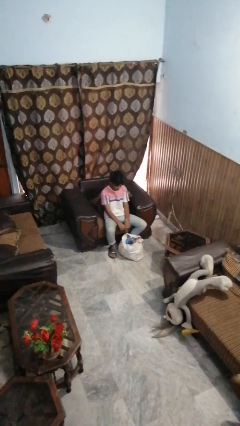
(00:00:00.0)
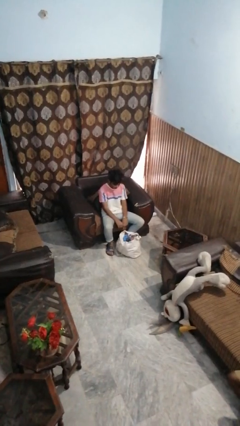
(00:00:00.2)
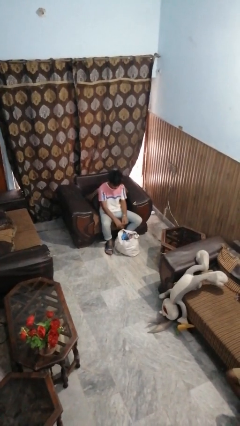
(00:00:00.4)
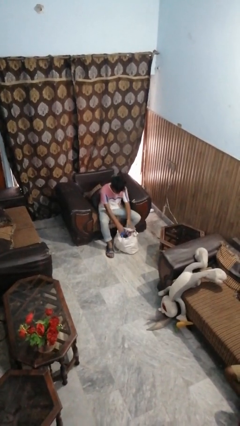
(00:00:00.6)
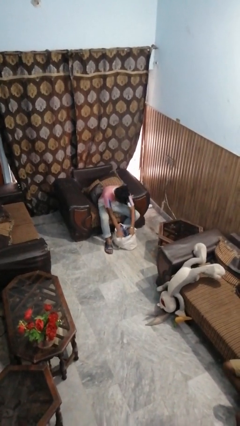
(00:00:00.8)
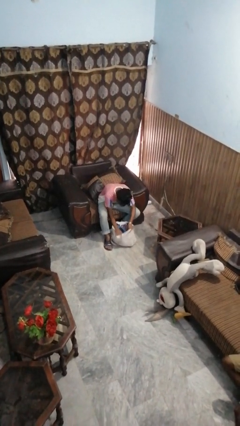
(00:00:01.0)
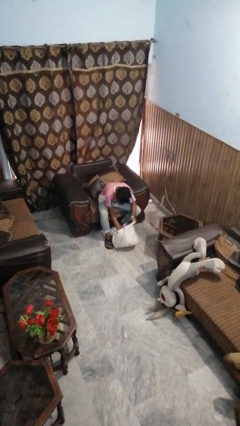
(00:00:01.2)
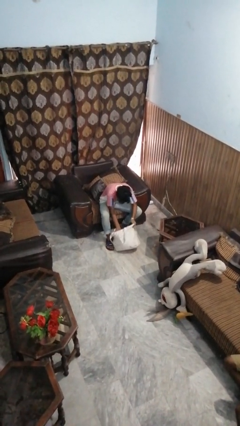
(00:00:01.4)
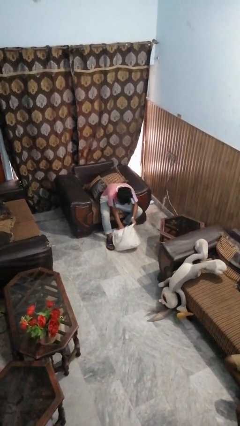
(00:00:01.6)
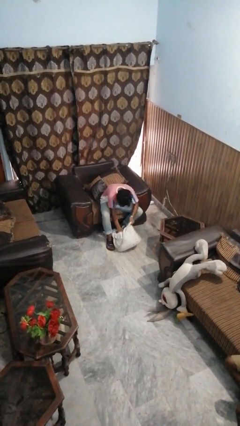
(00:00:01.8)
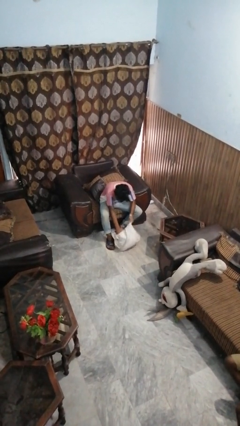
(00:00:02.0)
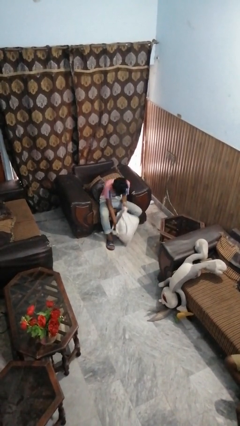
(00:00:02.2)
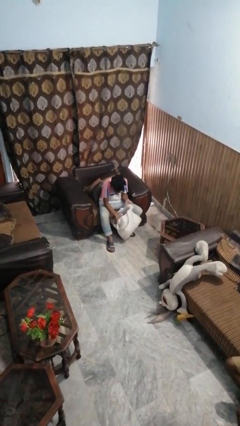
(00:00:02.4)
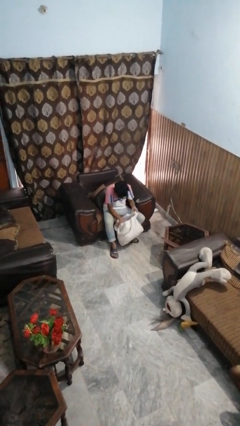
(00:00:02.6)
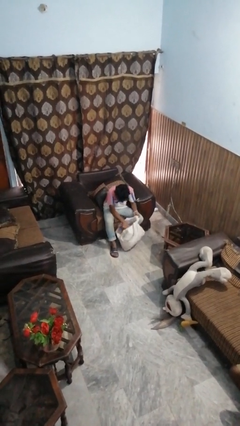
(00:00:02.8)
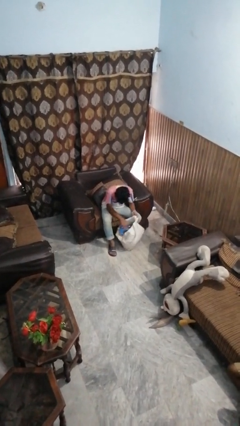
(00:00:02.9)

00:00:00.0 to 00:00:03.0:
person searches in bag

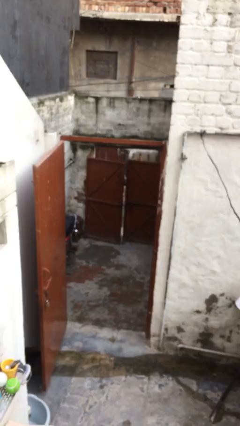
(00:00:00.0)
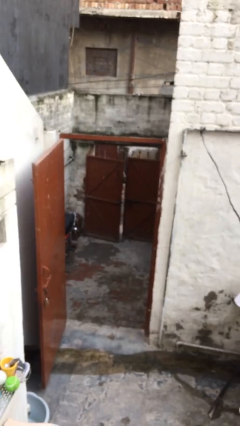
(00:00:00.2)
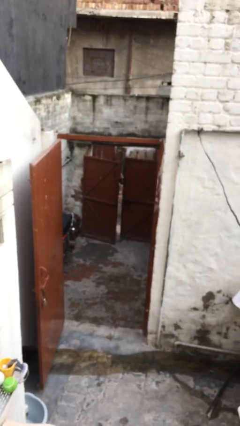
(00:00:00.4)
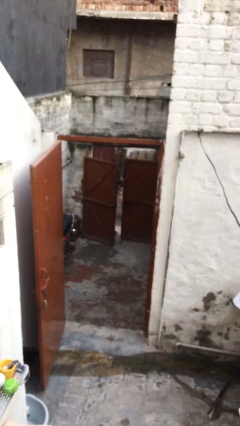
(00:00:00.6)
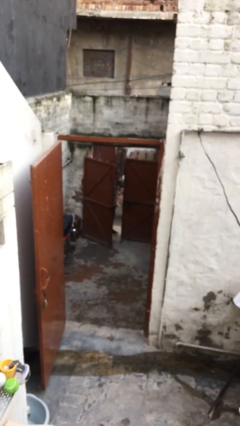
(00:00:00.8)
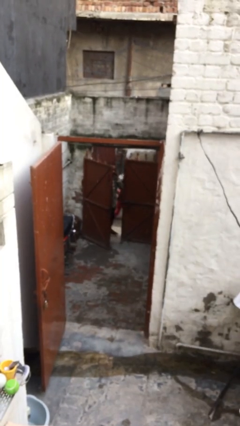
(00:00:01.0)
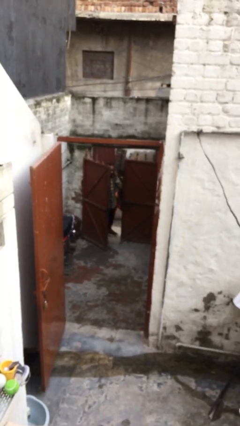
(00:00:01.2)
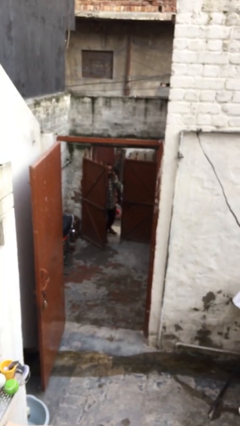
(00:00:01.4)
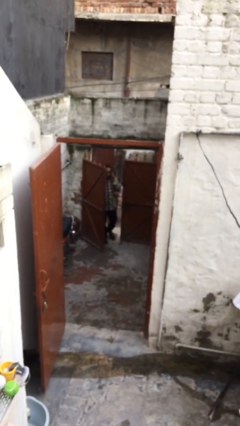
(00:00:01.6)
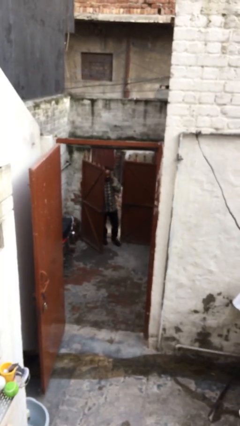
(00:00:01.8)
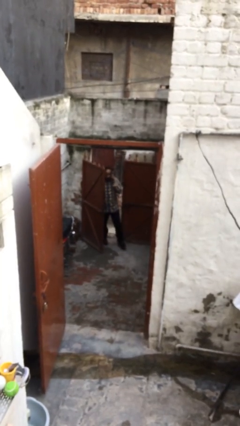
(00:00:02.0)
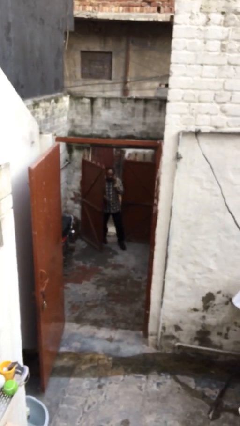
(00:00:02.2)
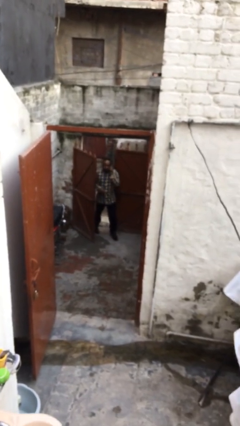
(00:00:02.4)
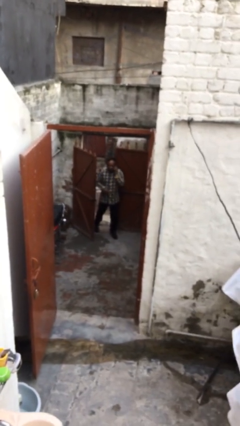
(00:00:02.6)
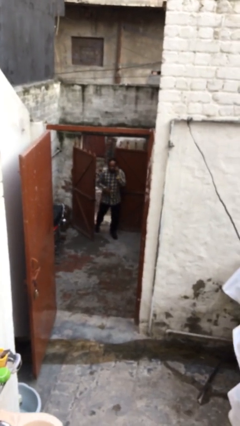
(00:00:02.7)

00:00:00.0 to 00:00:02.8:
person enters scene through structure

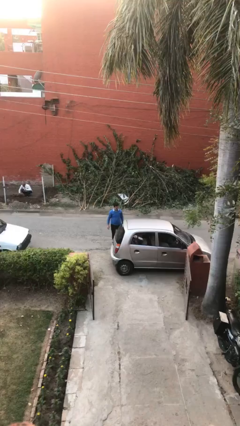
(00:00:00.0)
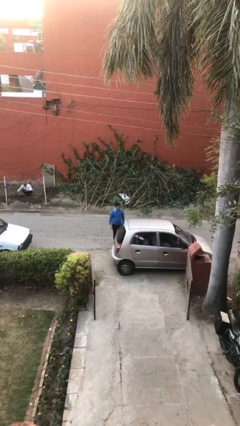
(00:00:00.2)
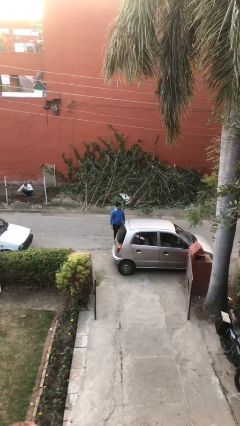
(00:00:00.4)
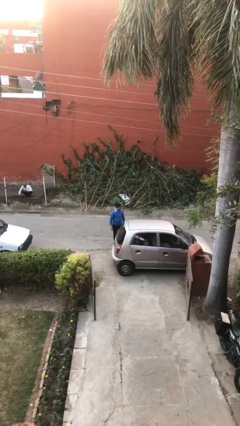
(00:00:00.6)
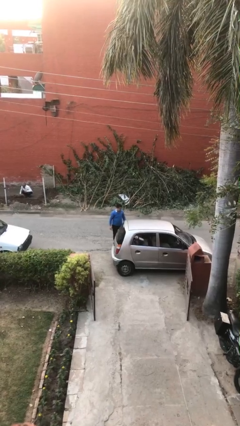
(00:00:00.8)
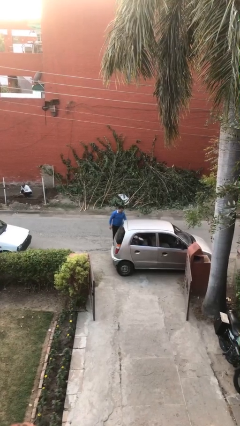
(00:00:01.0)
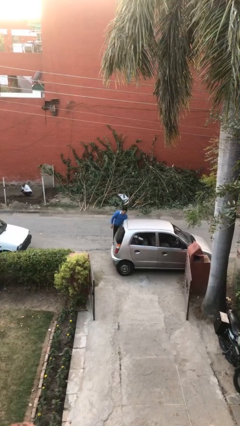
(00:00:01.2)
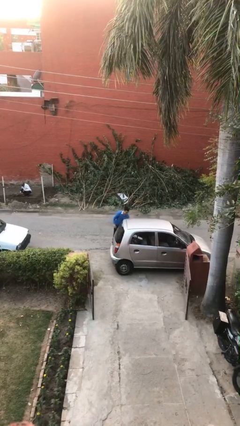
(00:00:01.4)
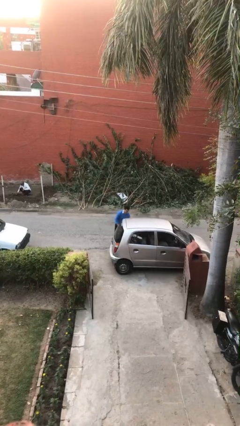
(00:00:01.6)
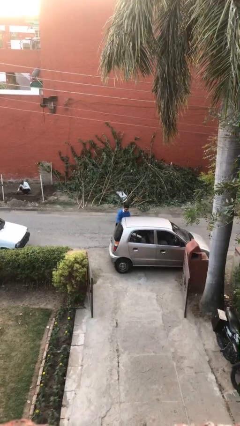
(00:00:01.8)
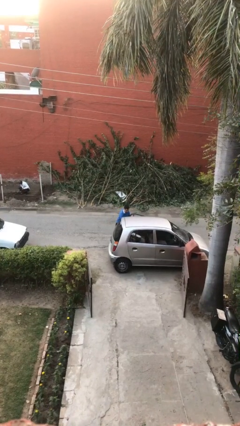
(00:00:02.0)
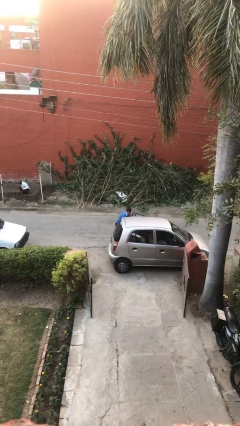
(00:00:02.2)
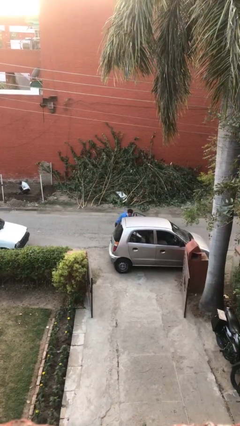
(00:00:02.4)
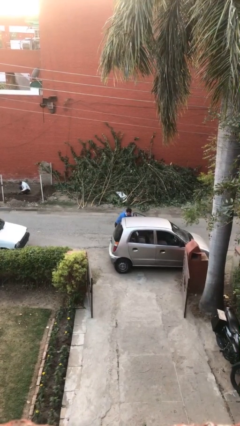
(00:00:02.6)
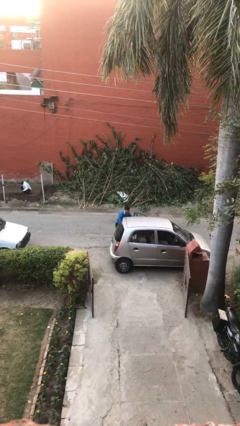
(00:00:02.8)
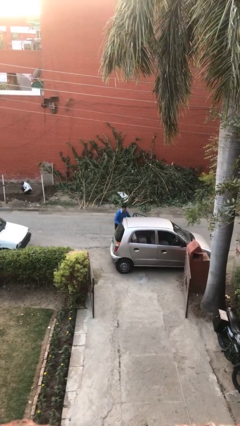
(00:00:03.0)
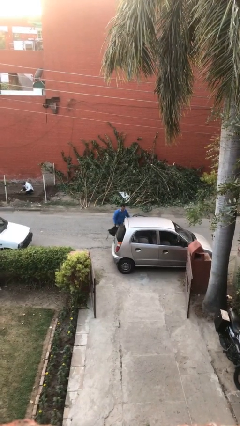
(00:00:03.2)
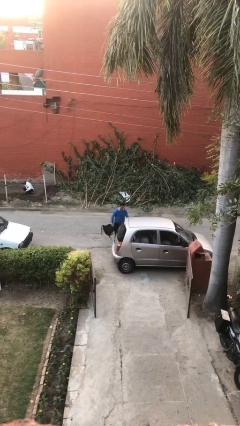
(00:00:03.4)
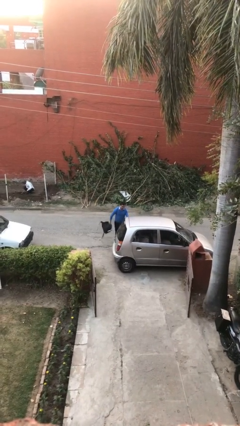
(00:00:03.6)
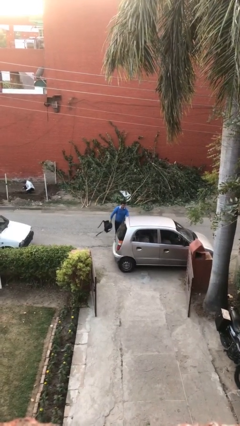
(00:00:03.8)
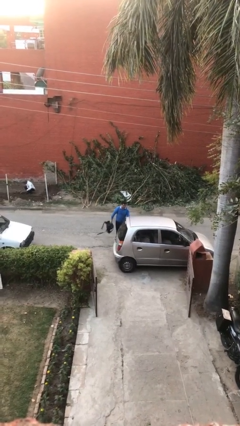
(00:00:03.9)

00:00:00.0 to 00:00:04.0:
person unloads car

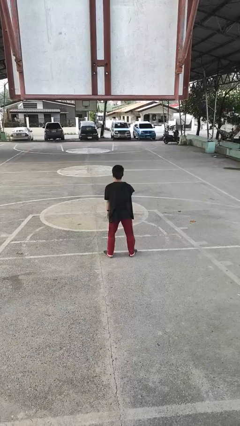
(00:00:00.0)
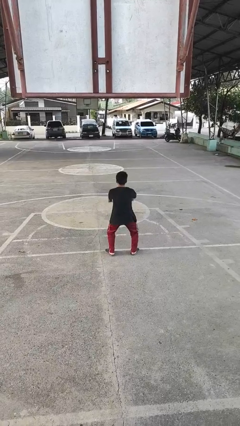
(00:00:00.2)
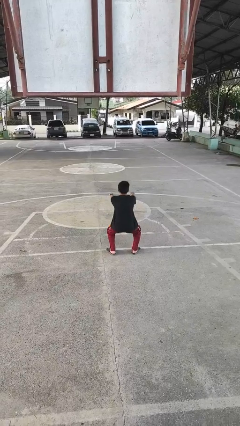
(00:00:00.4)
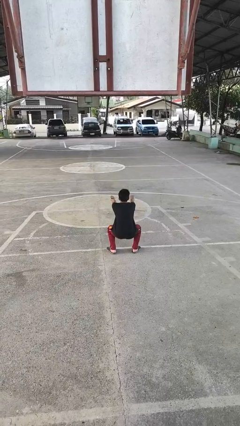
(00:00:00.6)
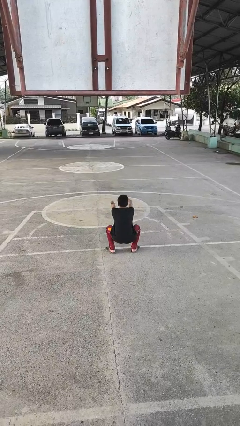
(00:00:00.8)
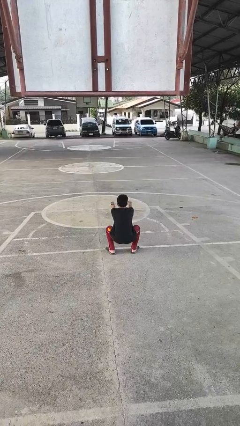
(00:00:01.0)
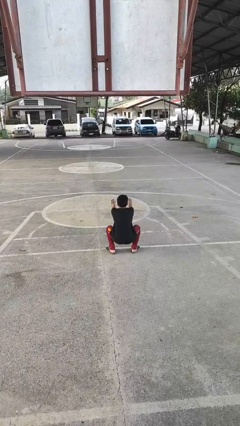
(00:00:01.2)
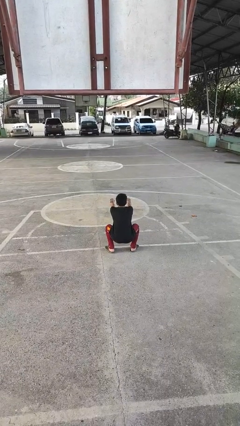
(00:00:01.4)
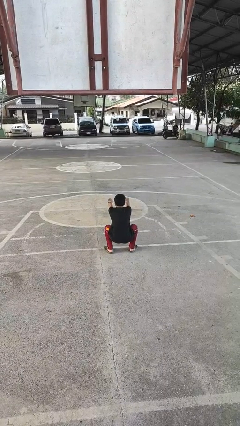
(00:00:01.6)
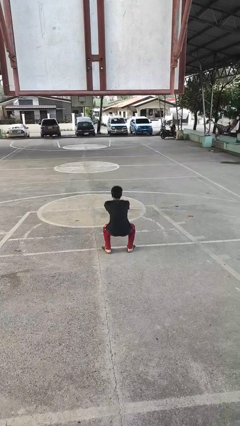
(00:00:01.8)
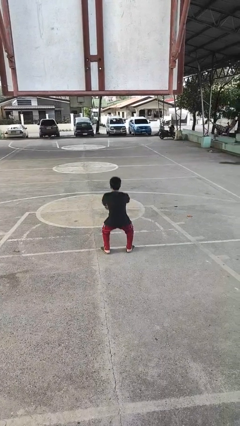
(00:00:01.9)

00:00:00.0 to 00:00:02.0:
person squats

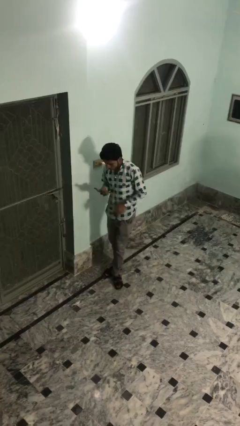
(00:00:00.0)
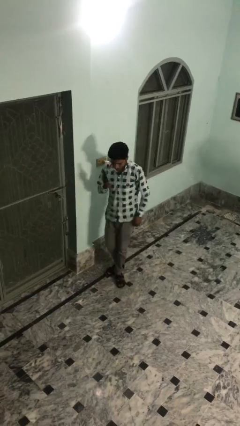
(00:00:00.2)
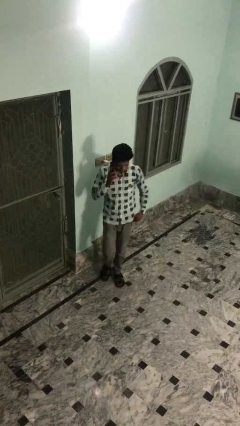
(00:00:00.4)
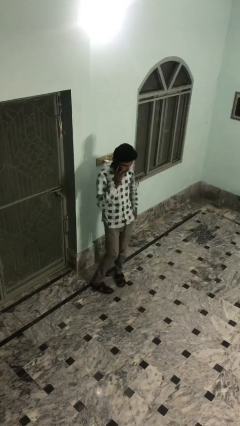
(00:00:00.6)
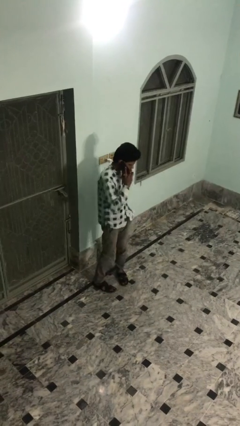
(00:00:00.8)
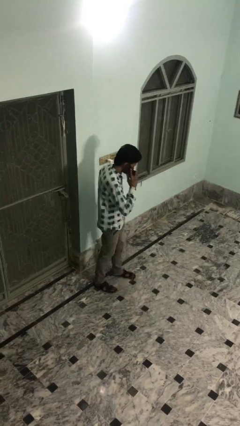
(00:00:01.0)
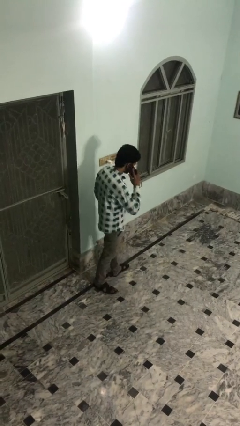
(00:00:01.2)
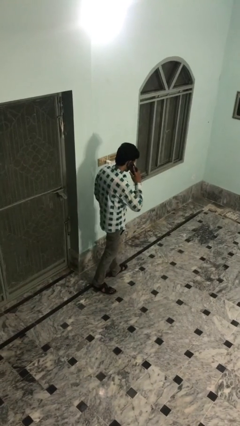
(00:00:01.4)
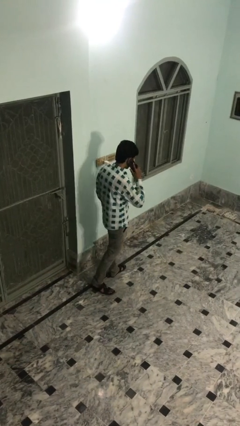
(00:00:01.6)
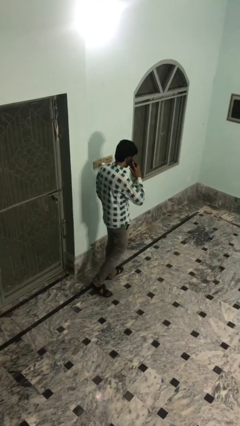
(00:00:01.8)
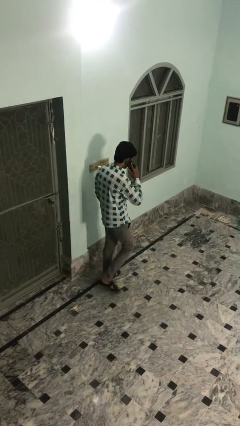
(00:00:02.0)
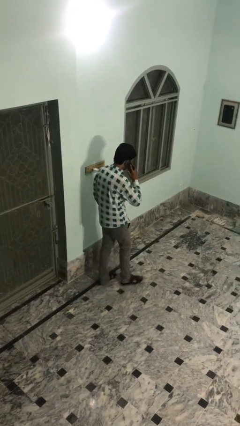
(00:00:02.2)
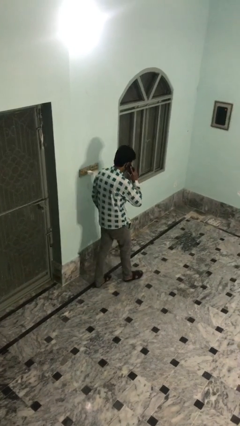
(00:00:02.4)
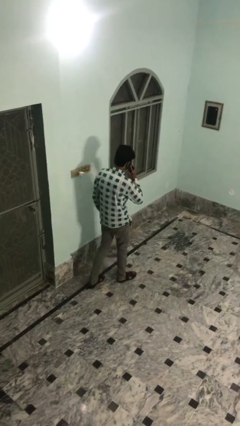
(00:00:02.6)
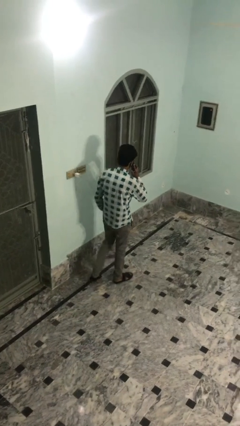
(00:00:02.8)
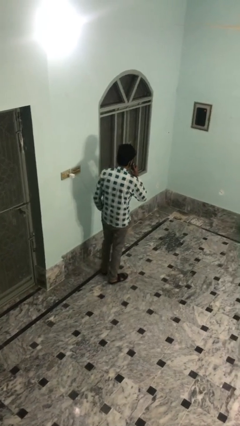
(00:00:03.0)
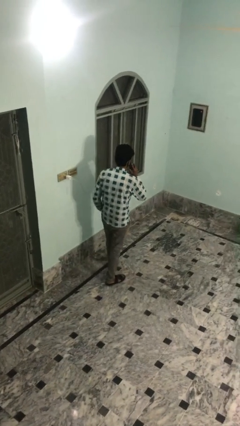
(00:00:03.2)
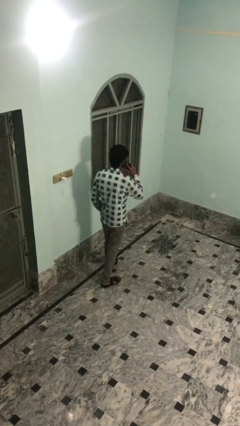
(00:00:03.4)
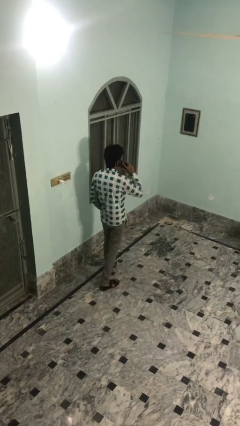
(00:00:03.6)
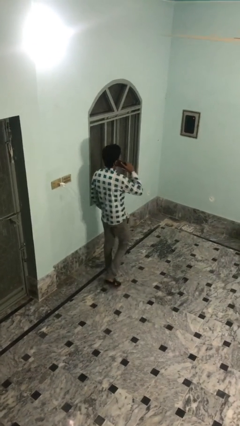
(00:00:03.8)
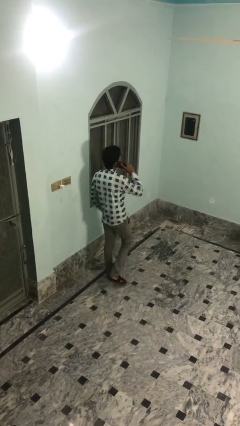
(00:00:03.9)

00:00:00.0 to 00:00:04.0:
person talks on phone

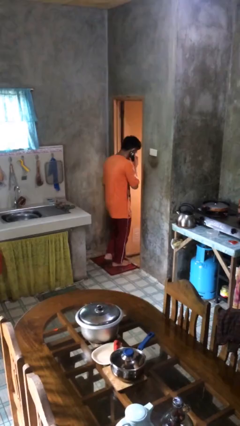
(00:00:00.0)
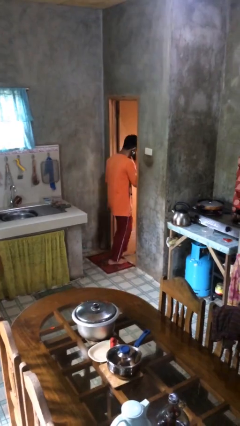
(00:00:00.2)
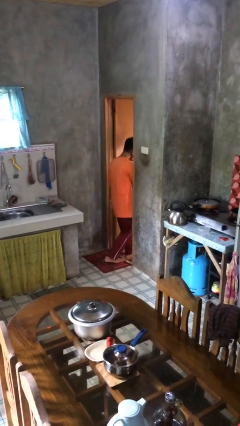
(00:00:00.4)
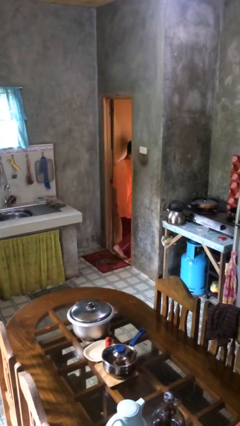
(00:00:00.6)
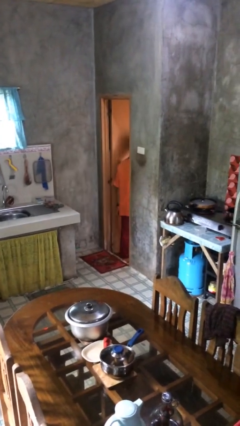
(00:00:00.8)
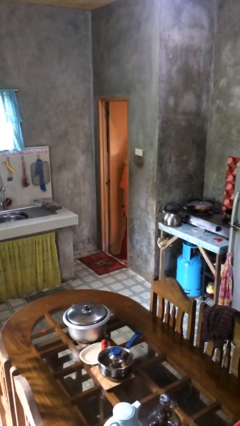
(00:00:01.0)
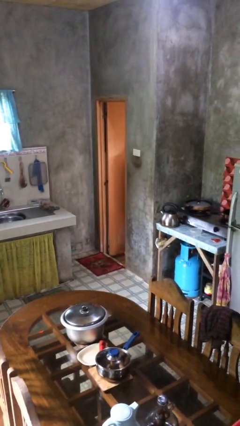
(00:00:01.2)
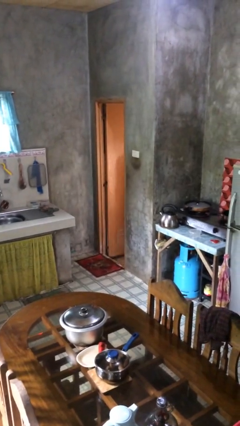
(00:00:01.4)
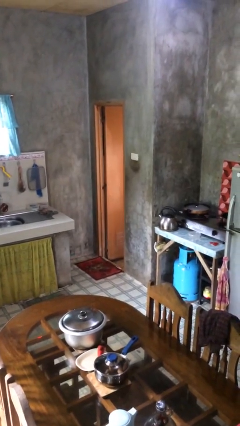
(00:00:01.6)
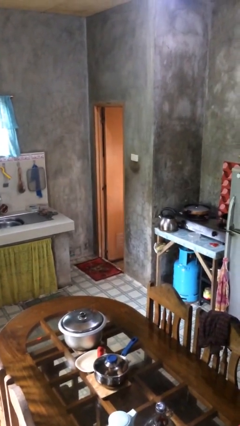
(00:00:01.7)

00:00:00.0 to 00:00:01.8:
person exits scene through structure
